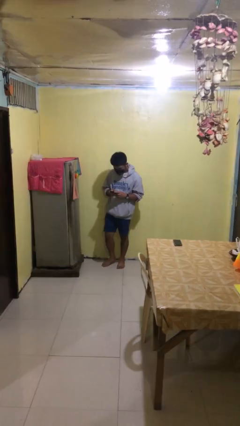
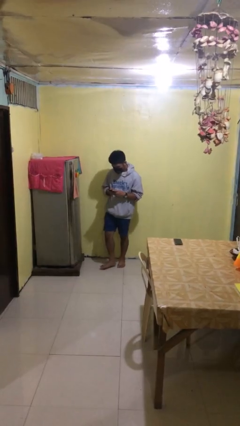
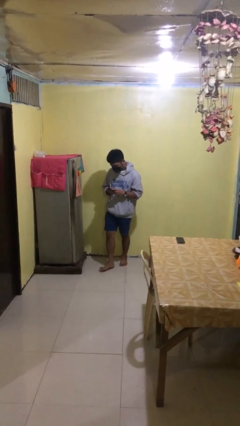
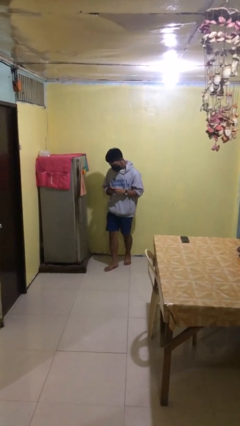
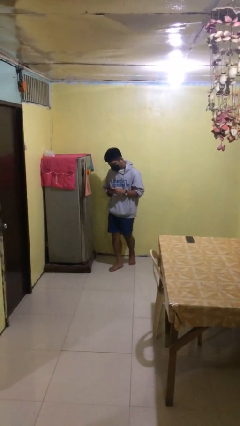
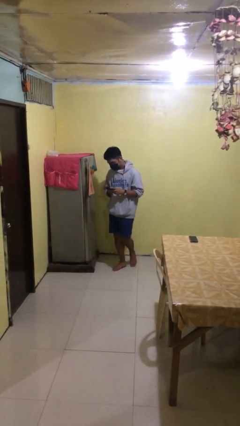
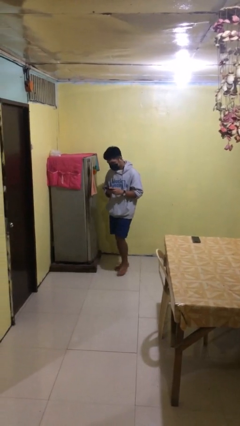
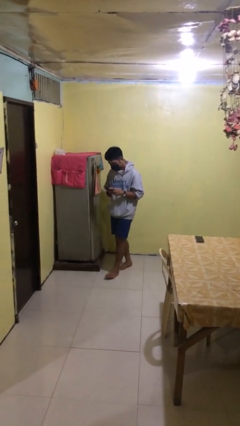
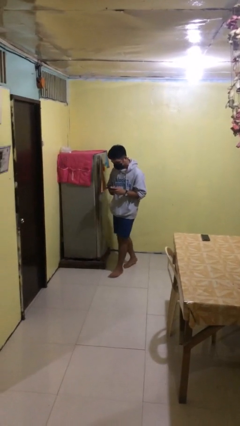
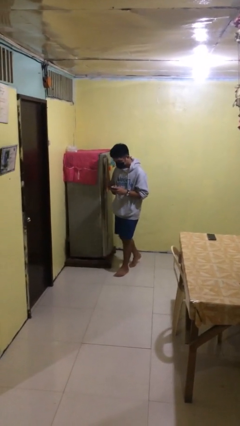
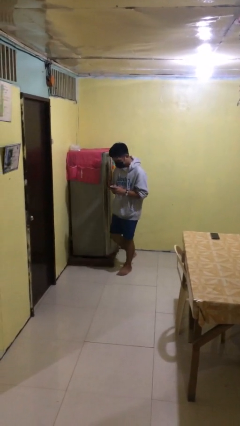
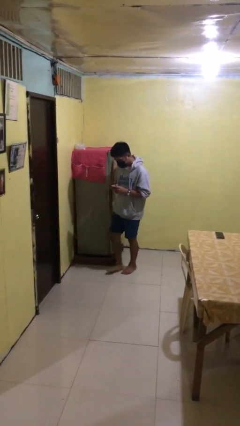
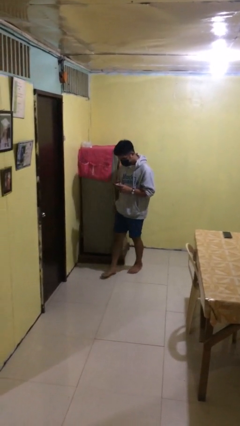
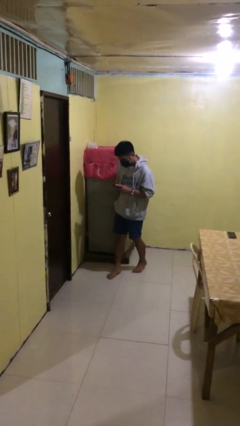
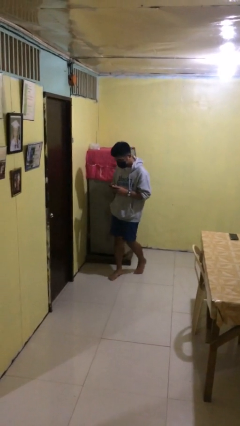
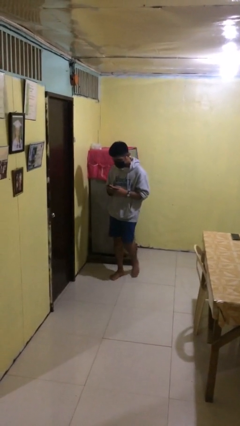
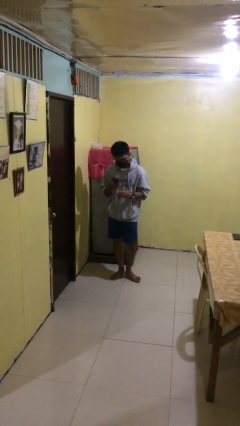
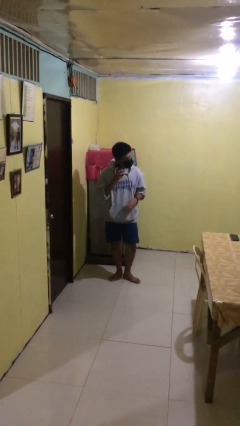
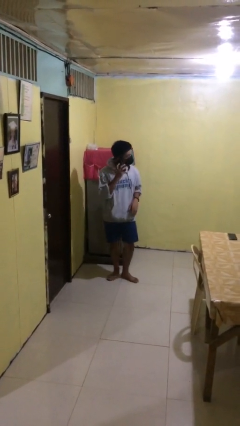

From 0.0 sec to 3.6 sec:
person texts on phone

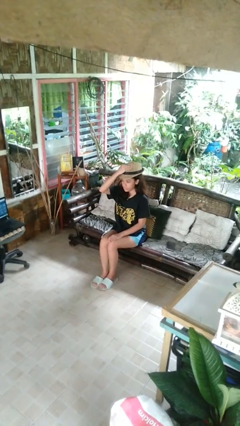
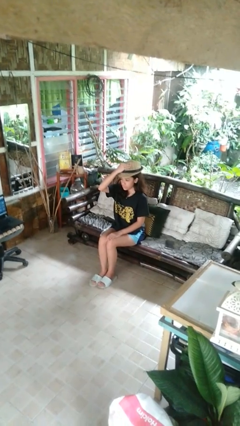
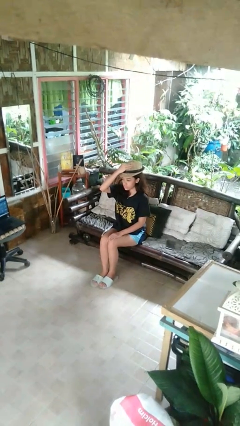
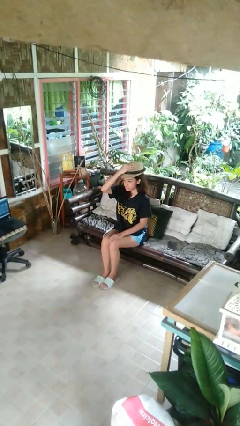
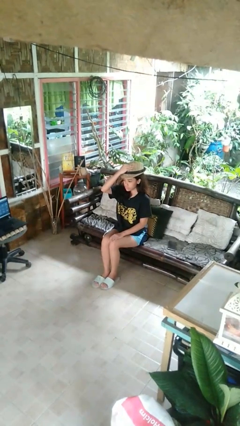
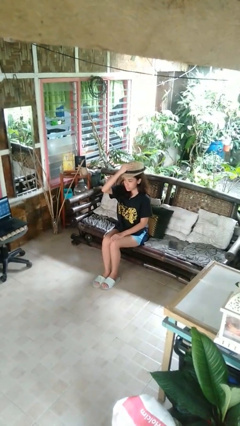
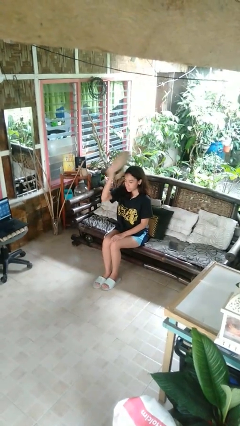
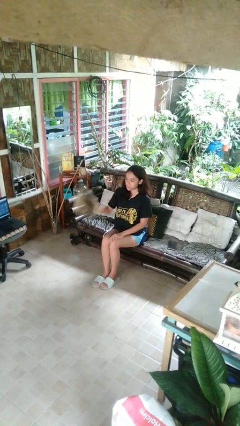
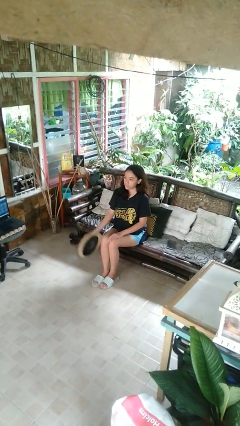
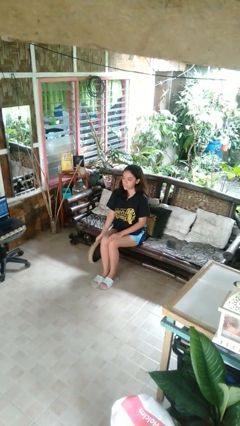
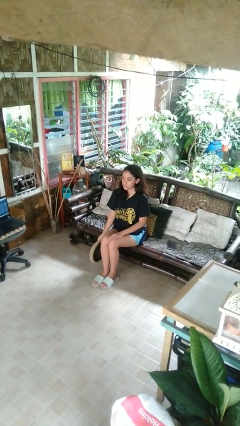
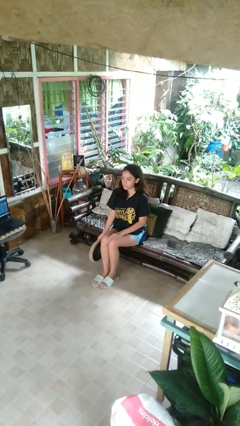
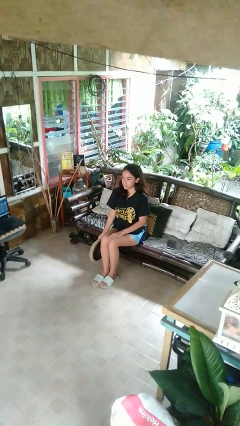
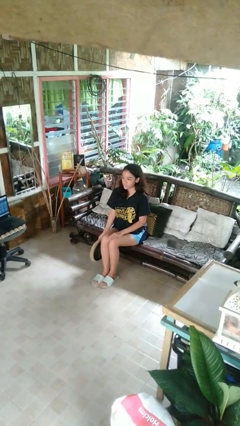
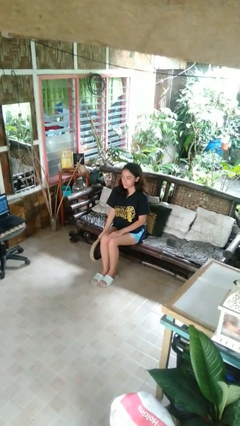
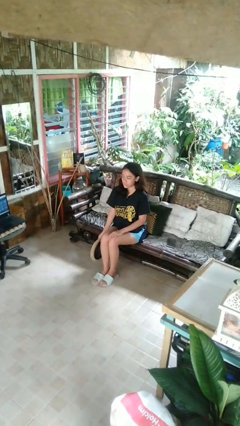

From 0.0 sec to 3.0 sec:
person takes off hat

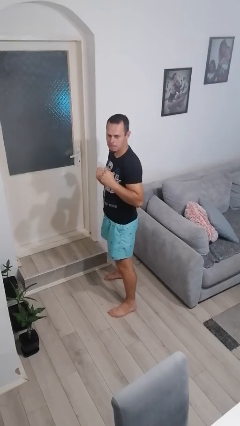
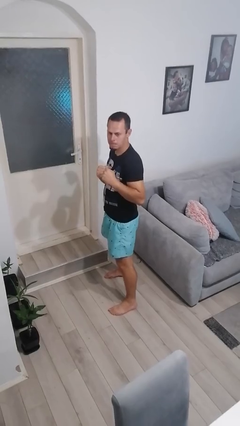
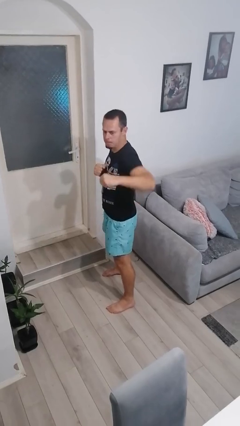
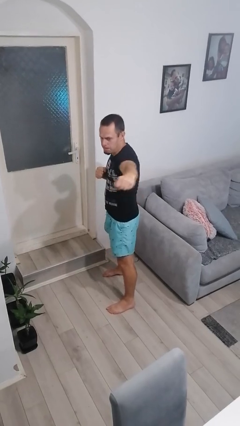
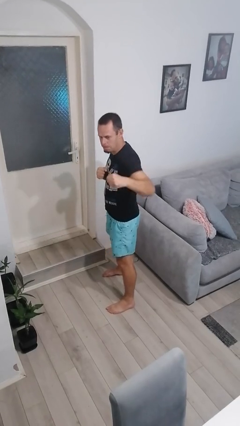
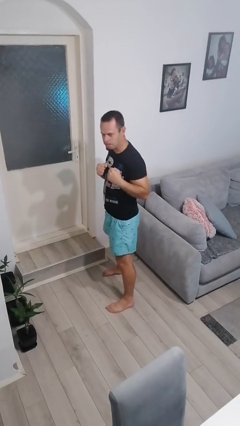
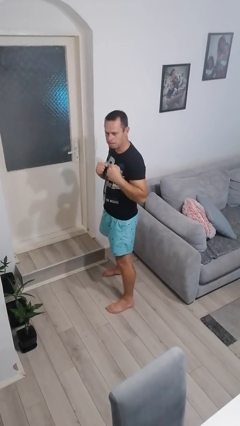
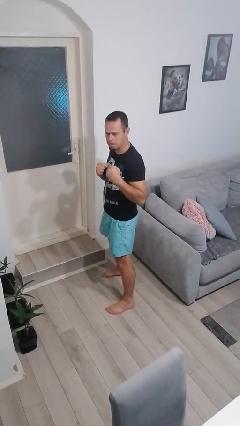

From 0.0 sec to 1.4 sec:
person karate chop

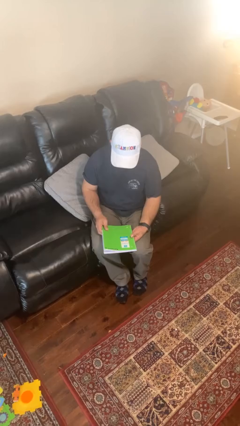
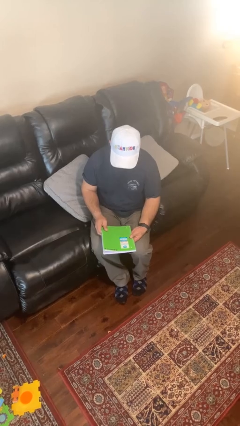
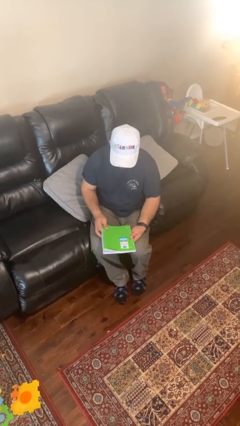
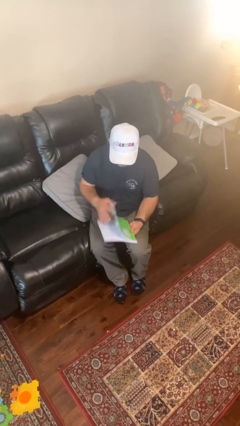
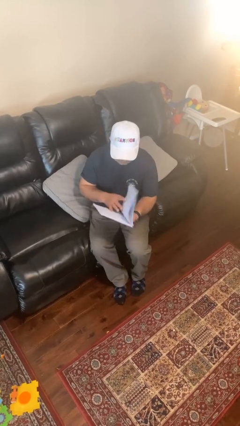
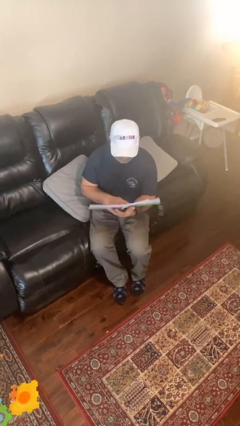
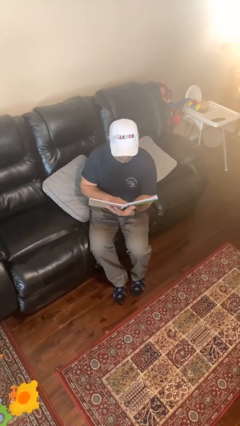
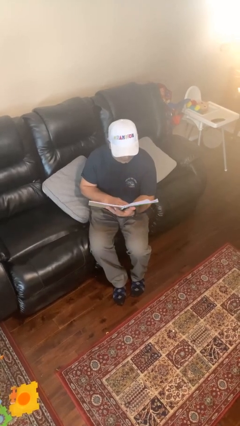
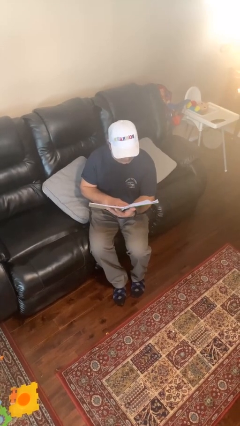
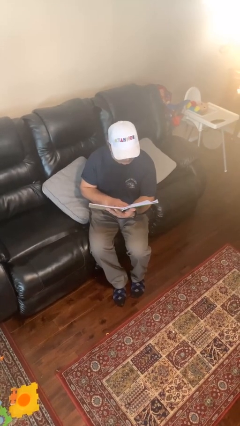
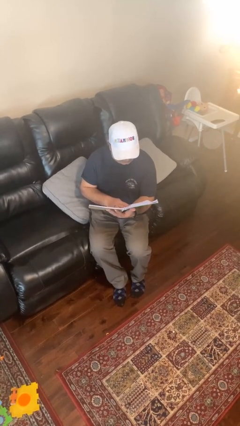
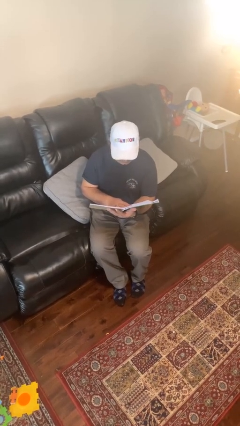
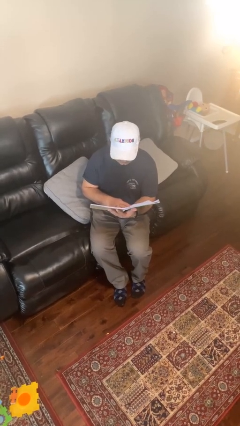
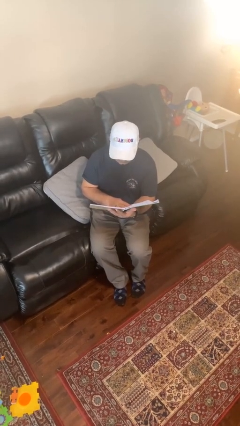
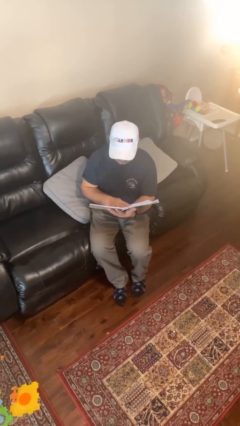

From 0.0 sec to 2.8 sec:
person reads document

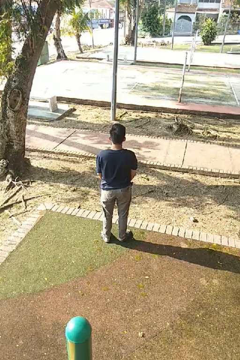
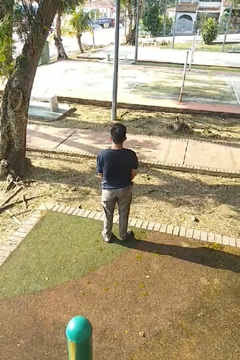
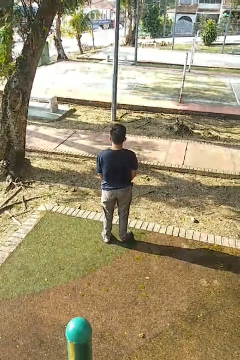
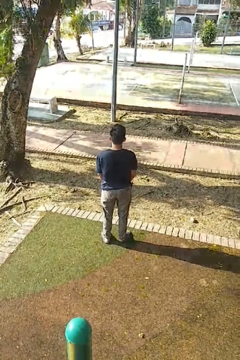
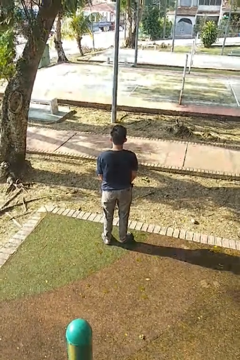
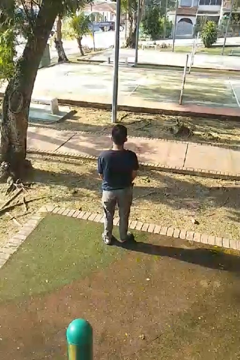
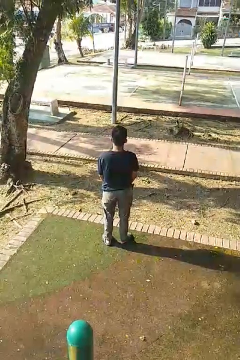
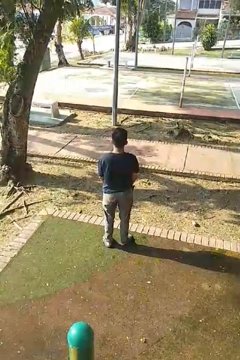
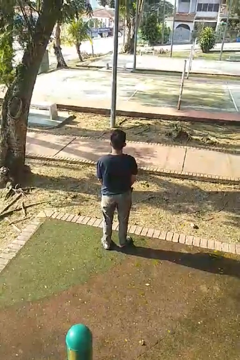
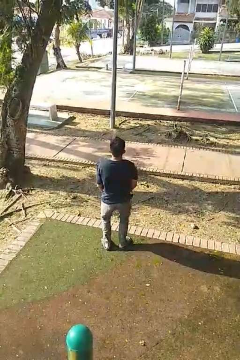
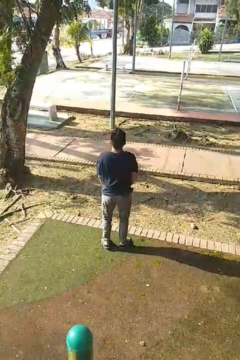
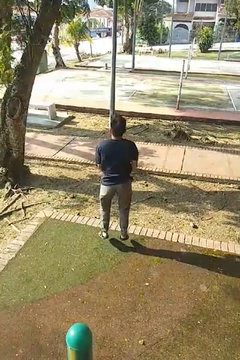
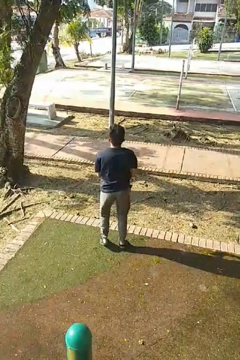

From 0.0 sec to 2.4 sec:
person jumps

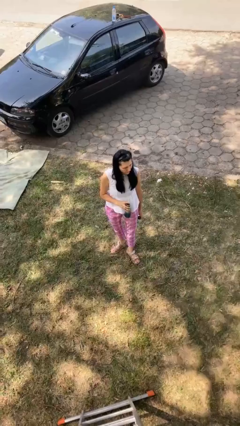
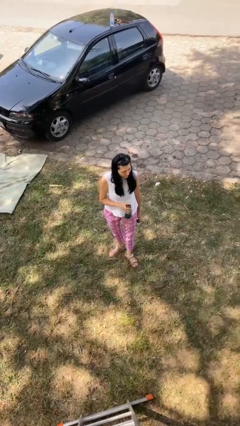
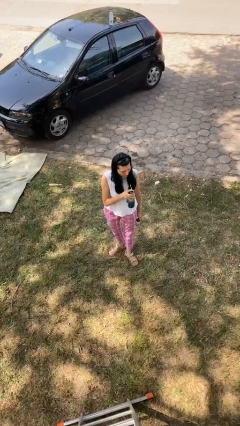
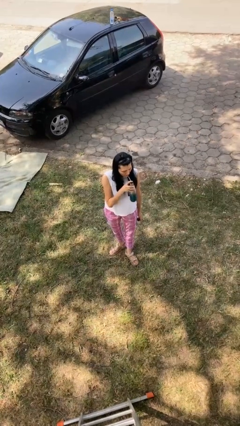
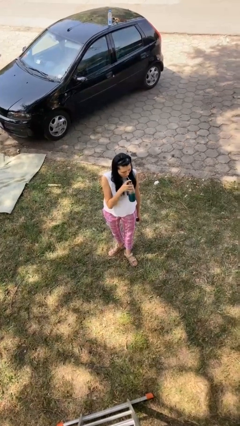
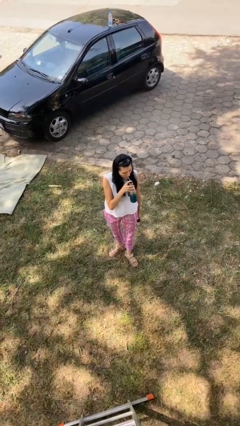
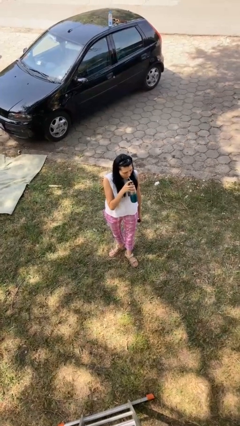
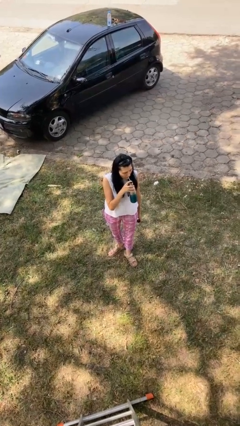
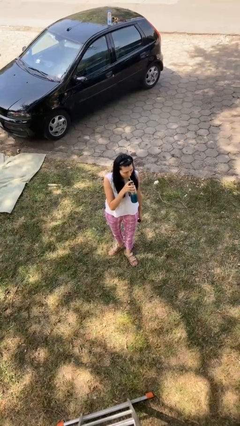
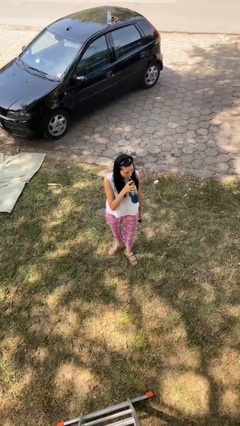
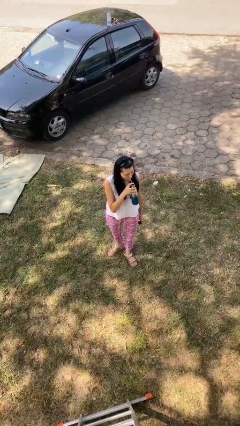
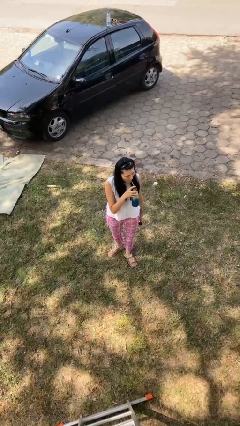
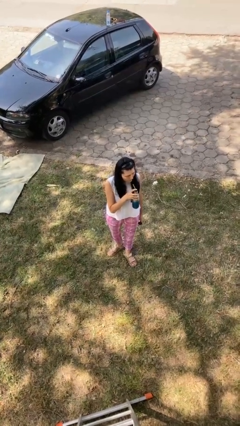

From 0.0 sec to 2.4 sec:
person drinks from straw

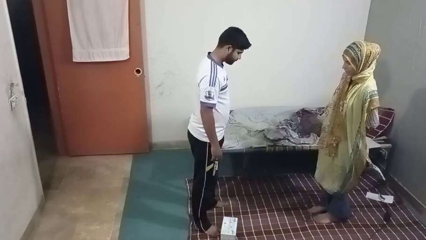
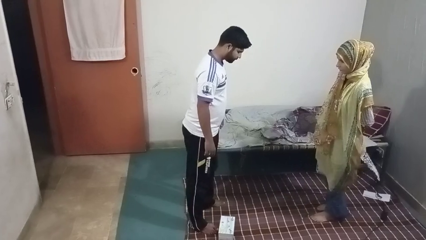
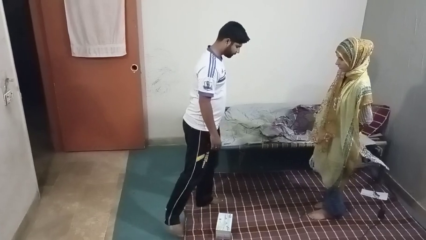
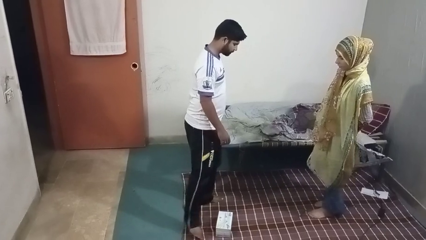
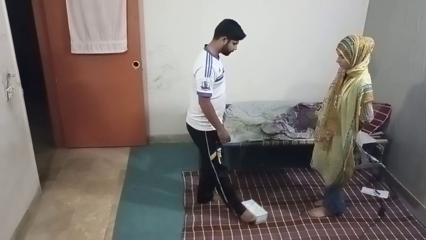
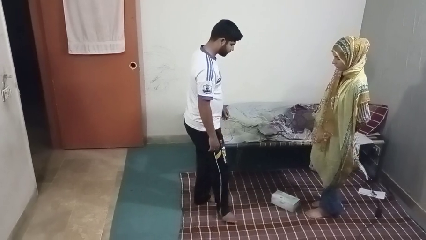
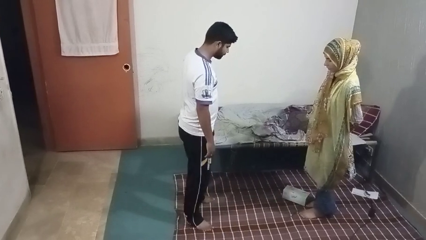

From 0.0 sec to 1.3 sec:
person kicks object to person

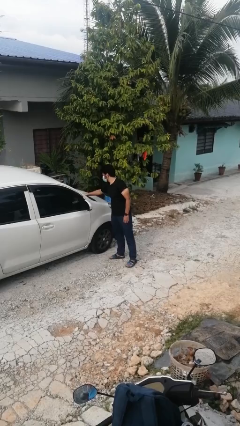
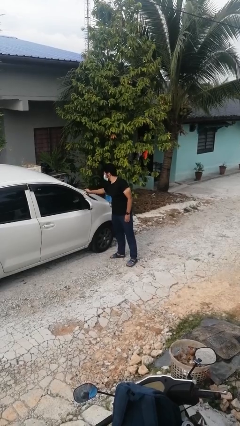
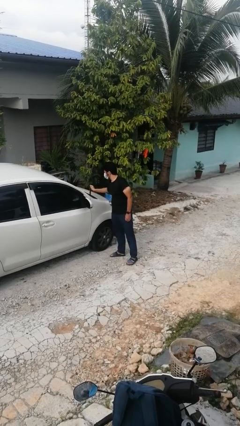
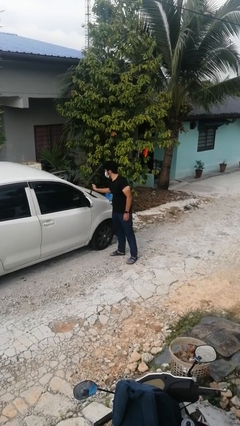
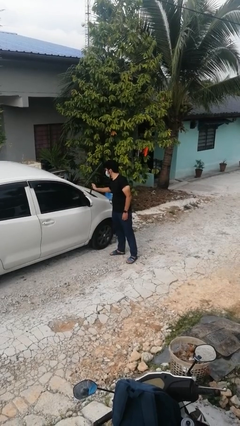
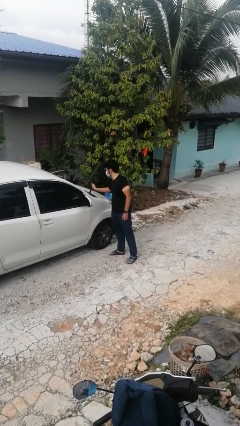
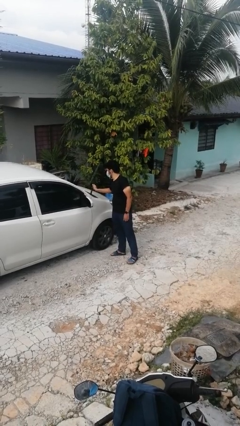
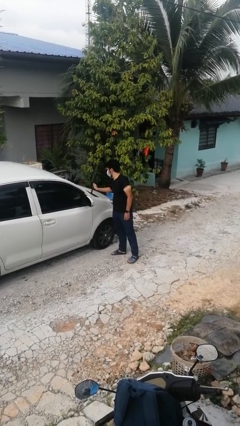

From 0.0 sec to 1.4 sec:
person flips up car wipers
